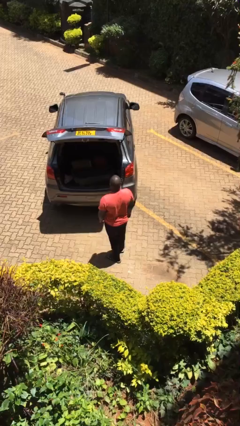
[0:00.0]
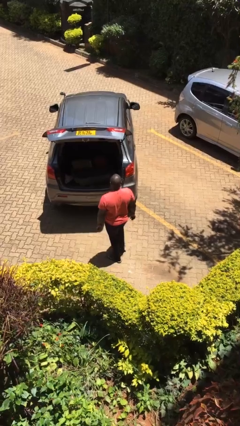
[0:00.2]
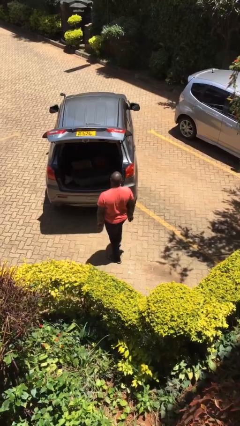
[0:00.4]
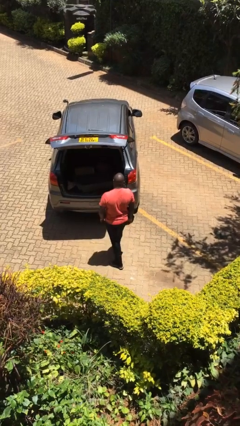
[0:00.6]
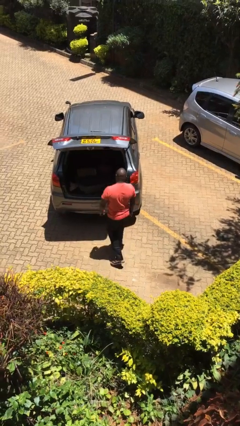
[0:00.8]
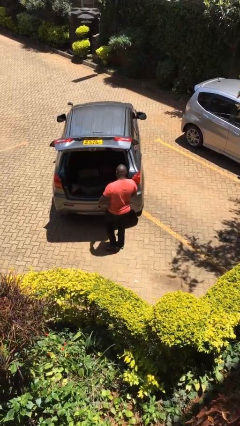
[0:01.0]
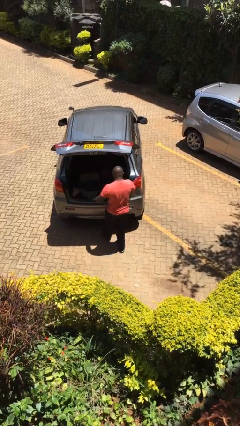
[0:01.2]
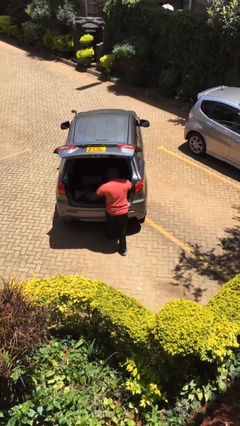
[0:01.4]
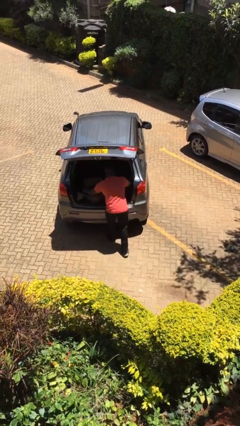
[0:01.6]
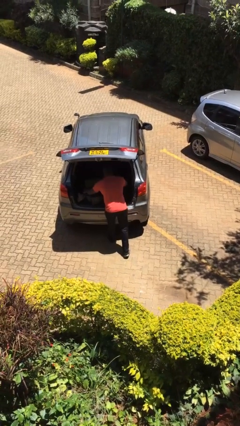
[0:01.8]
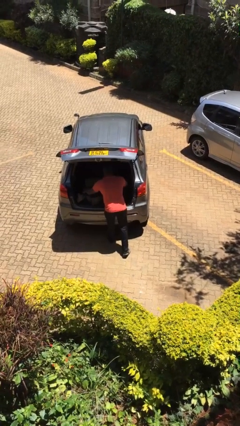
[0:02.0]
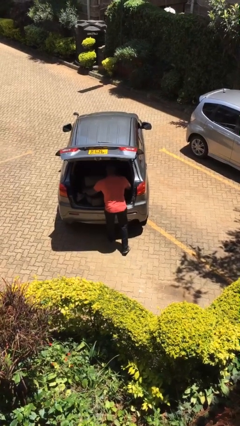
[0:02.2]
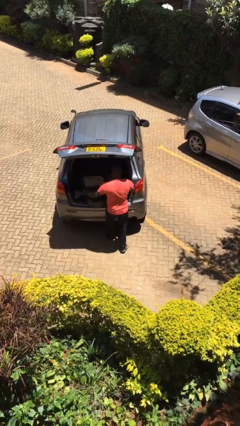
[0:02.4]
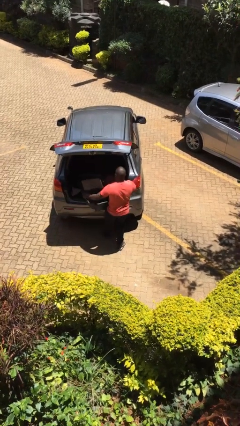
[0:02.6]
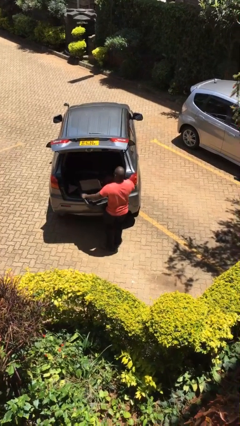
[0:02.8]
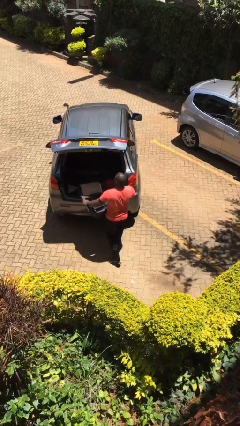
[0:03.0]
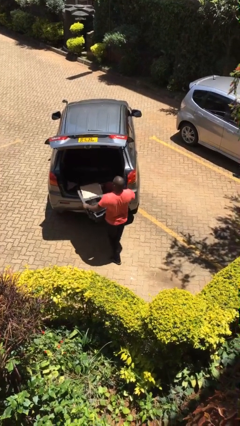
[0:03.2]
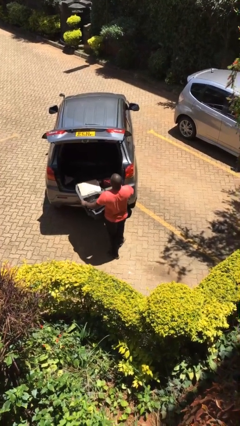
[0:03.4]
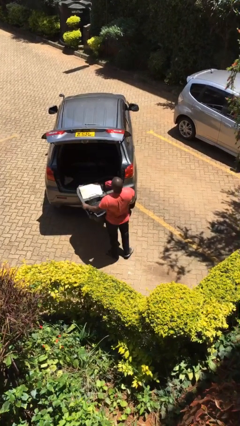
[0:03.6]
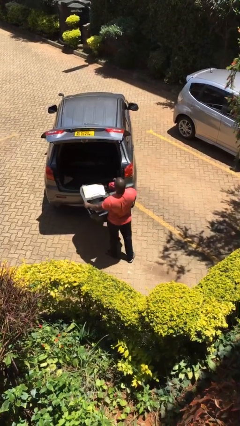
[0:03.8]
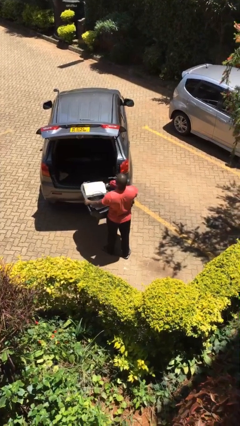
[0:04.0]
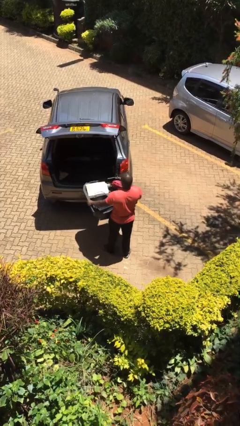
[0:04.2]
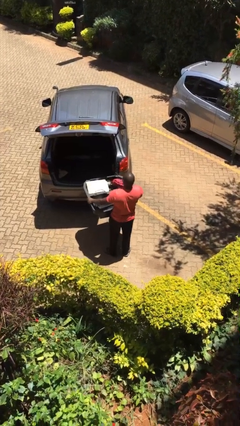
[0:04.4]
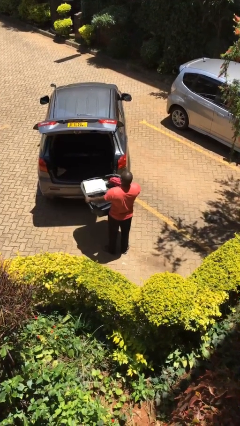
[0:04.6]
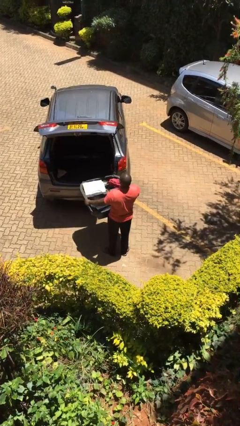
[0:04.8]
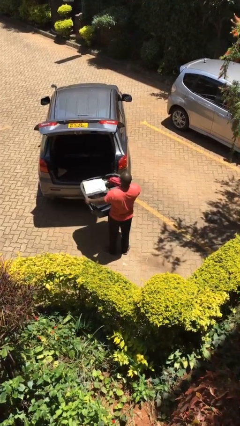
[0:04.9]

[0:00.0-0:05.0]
person unloads car

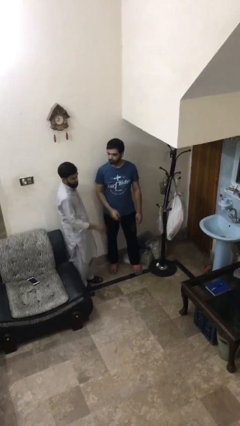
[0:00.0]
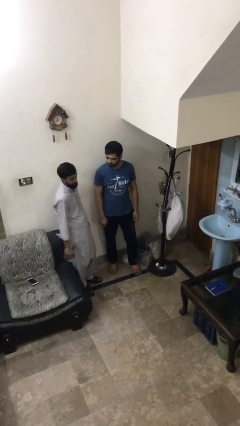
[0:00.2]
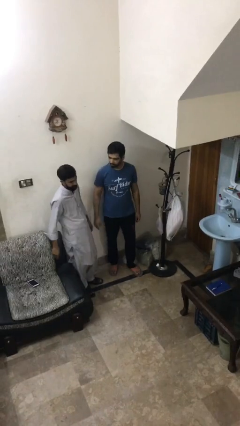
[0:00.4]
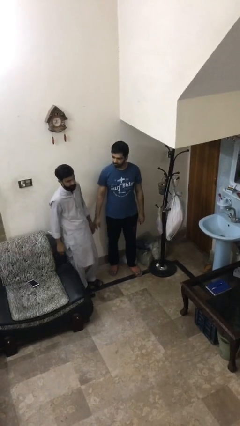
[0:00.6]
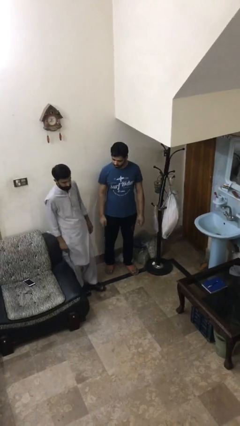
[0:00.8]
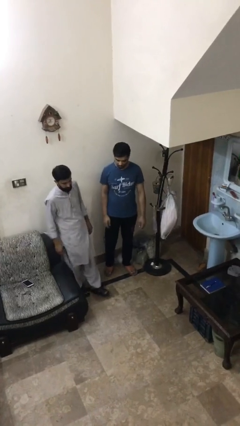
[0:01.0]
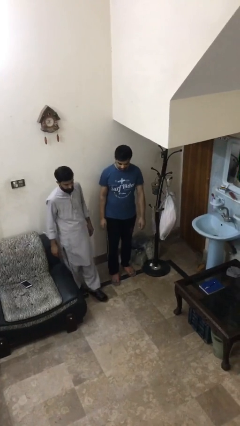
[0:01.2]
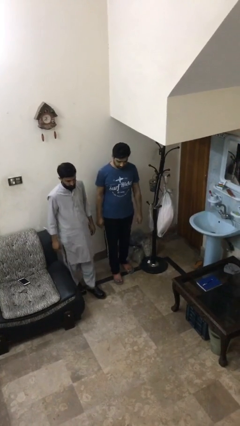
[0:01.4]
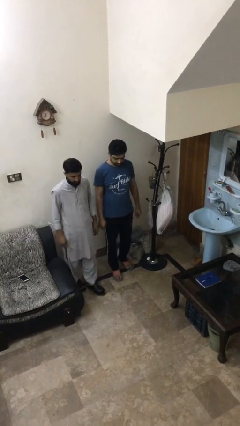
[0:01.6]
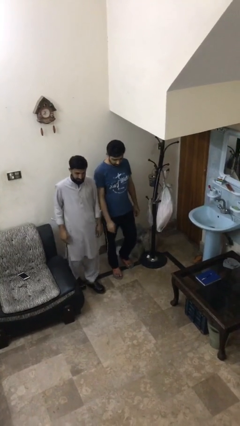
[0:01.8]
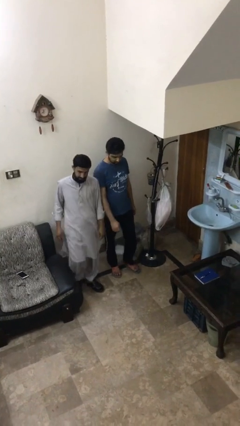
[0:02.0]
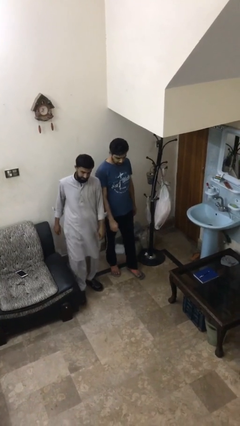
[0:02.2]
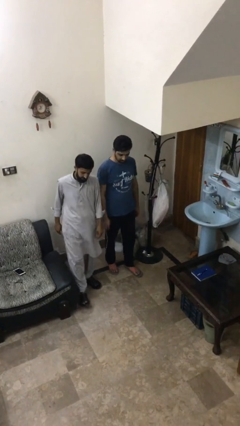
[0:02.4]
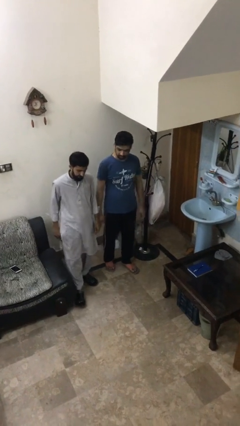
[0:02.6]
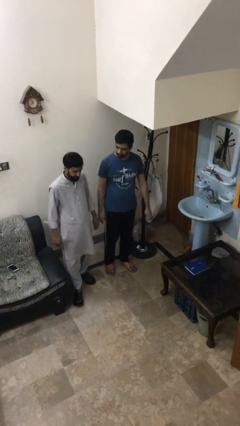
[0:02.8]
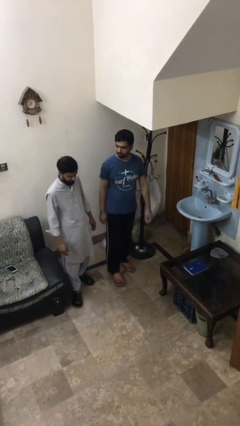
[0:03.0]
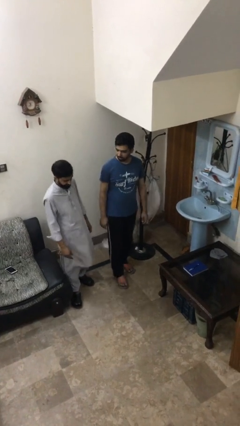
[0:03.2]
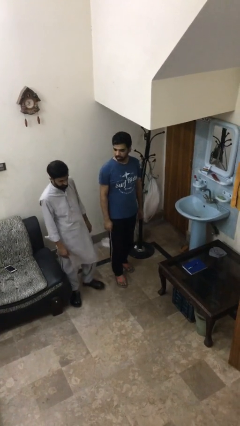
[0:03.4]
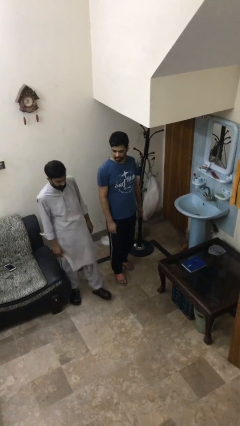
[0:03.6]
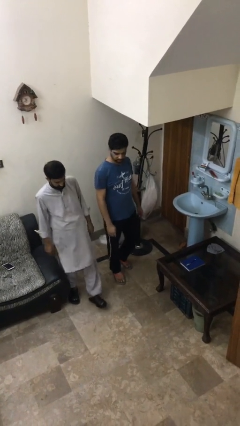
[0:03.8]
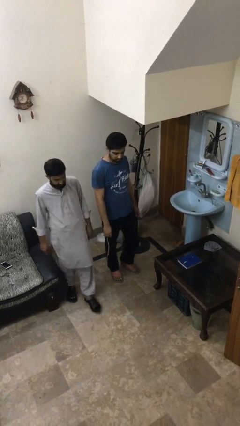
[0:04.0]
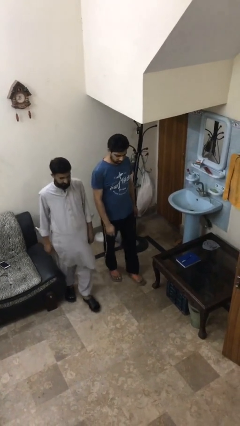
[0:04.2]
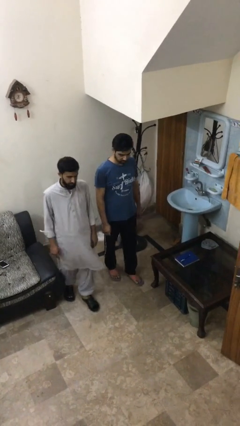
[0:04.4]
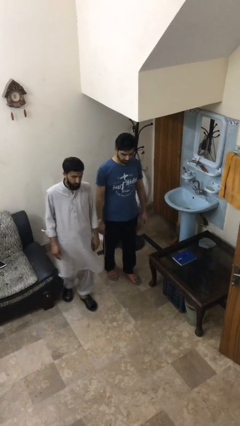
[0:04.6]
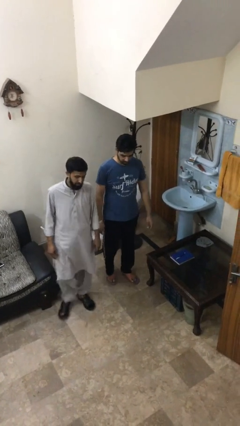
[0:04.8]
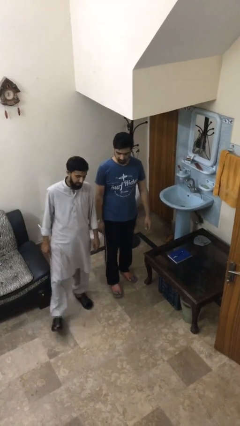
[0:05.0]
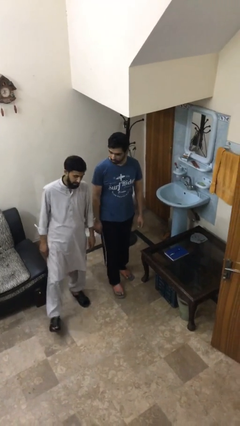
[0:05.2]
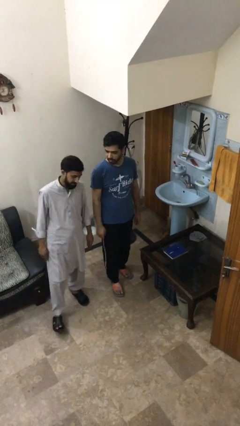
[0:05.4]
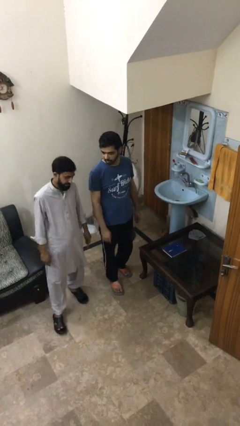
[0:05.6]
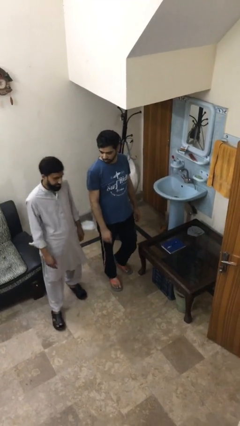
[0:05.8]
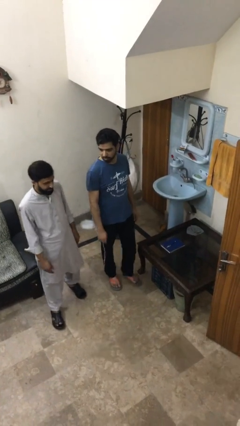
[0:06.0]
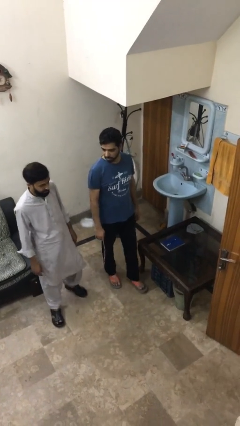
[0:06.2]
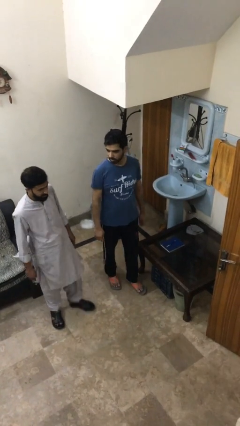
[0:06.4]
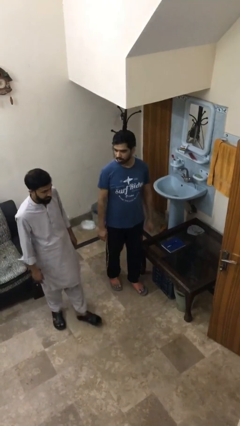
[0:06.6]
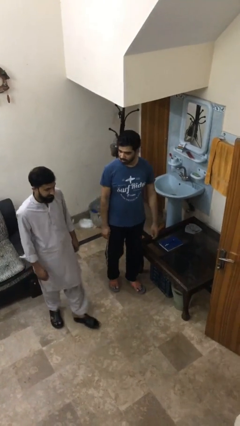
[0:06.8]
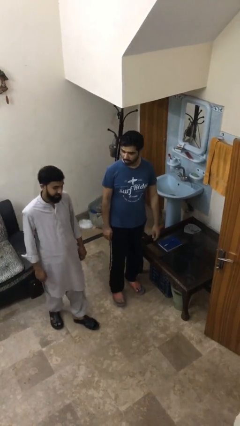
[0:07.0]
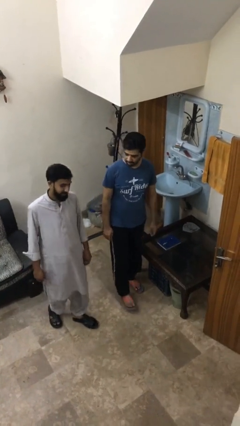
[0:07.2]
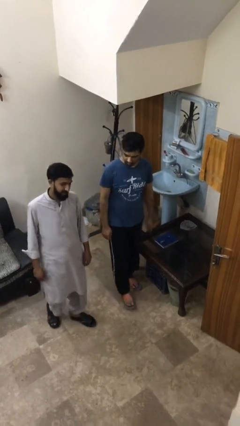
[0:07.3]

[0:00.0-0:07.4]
person talks to person

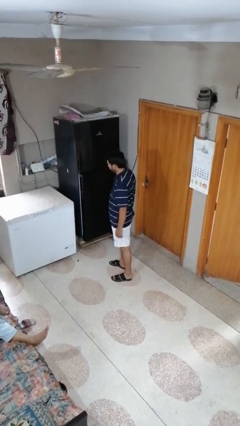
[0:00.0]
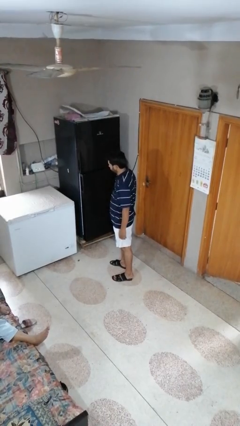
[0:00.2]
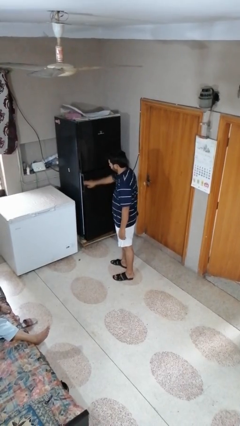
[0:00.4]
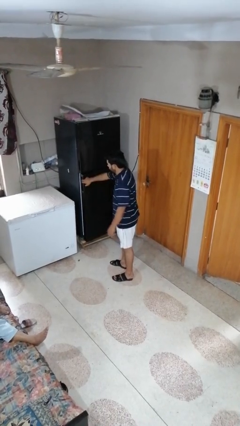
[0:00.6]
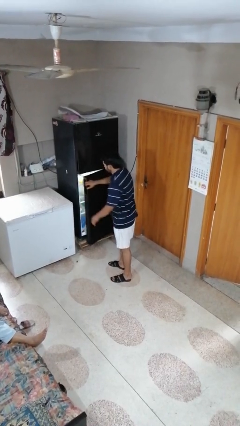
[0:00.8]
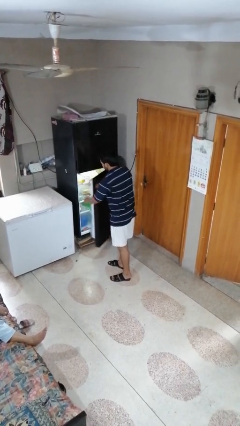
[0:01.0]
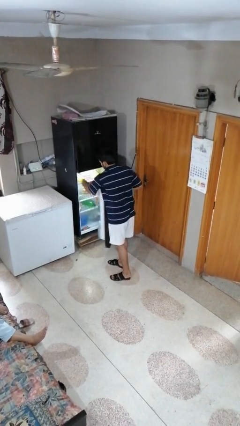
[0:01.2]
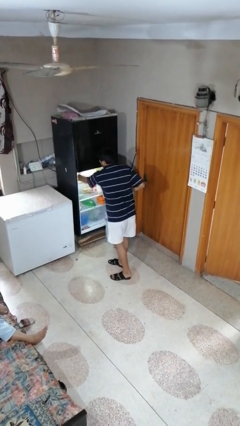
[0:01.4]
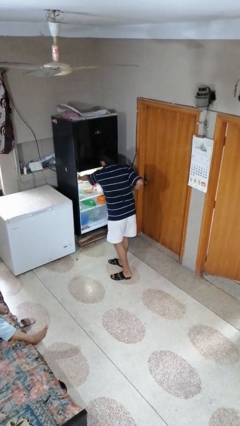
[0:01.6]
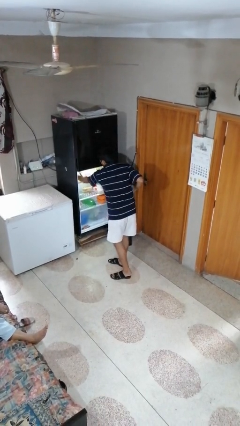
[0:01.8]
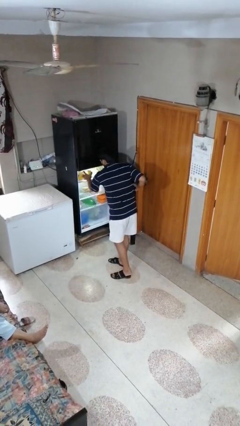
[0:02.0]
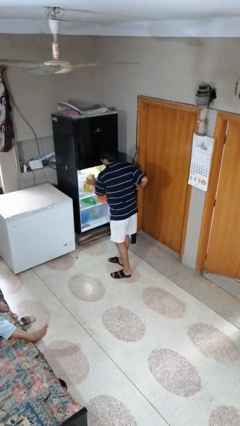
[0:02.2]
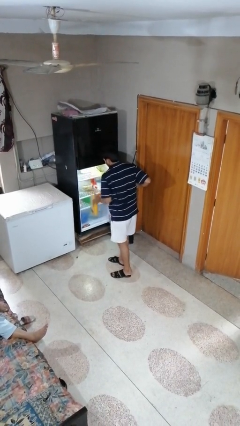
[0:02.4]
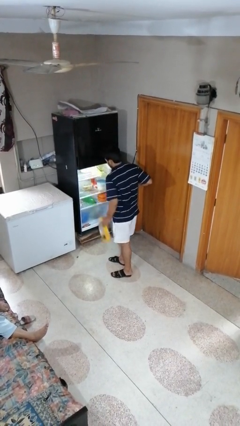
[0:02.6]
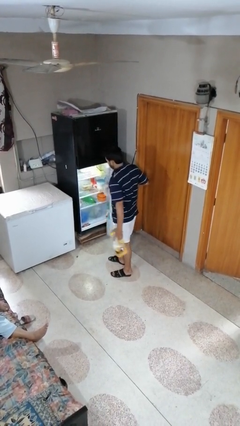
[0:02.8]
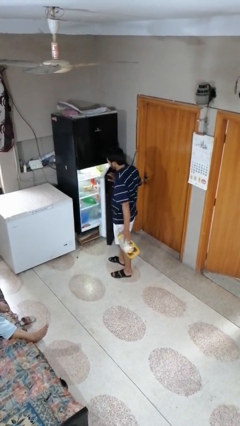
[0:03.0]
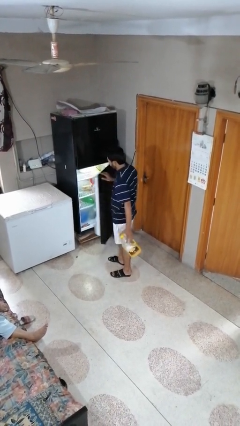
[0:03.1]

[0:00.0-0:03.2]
person takes object from refrigerator

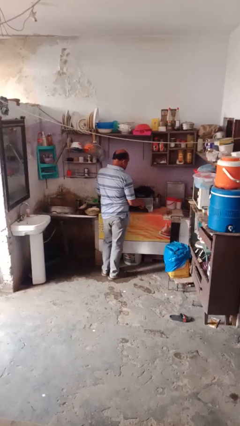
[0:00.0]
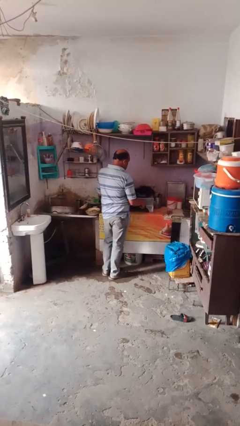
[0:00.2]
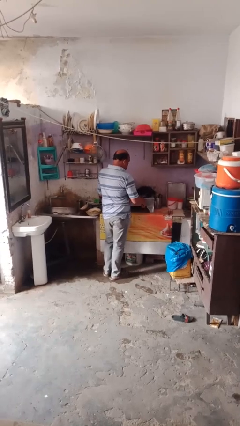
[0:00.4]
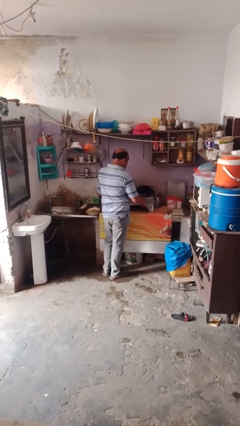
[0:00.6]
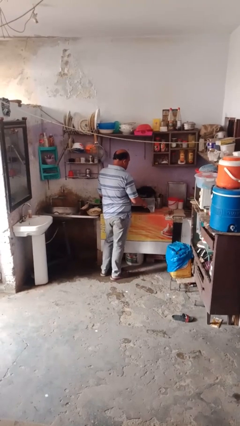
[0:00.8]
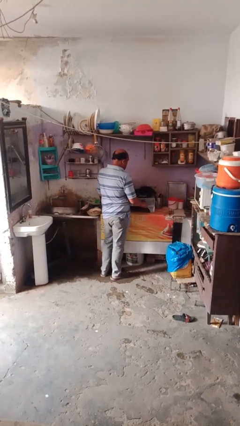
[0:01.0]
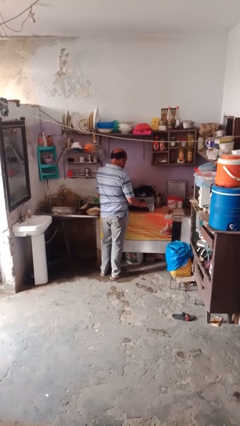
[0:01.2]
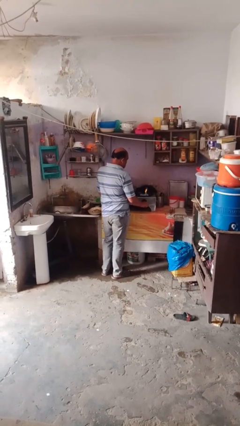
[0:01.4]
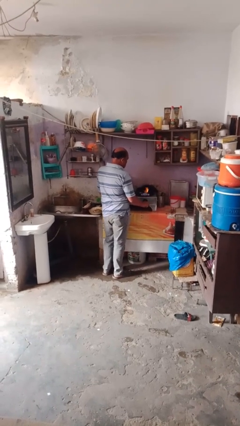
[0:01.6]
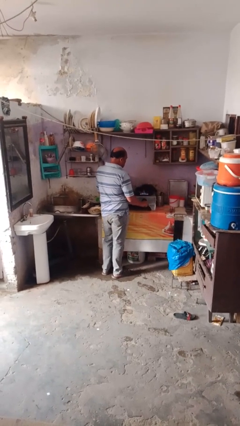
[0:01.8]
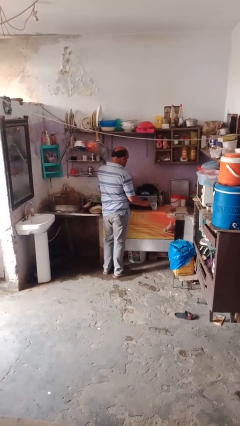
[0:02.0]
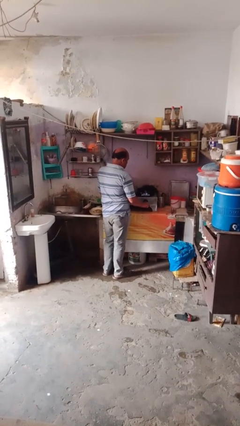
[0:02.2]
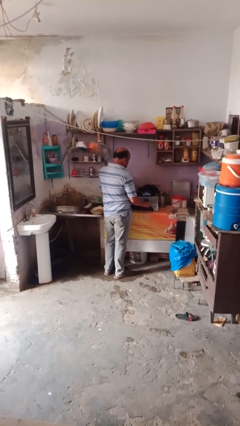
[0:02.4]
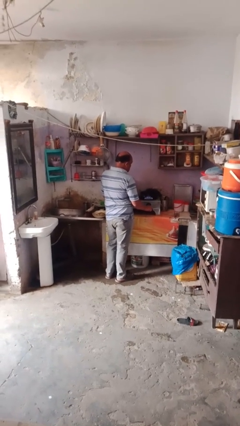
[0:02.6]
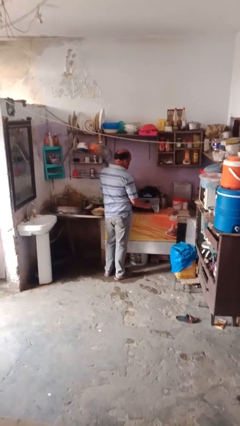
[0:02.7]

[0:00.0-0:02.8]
person turns on stovetop
